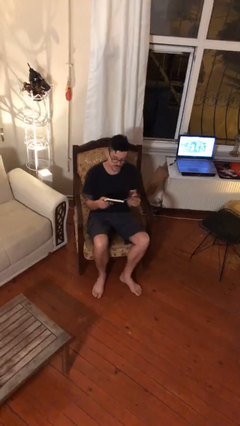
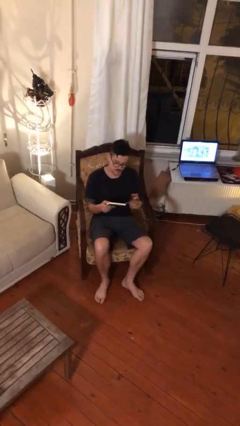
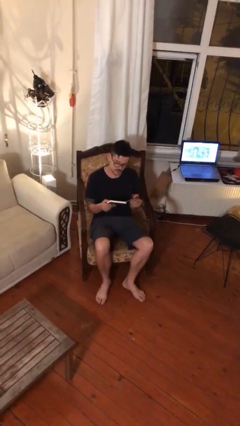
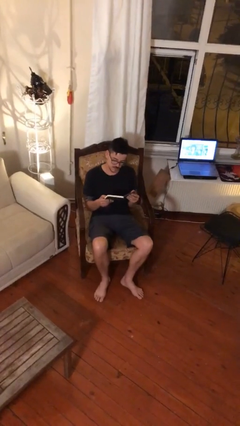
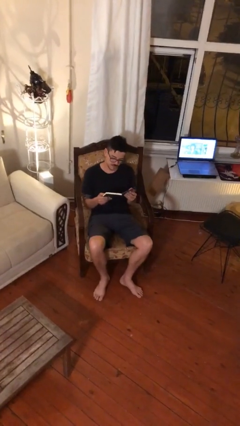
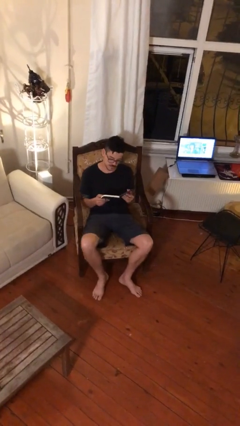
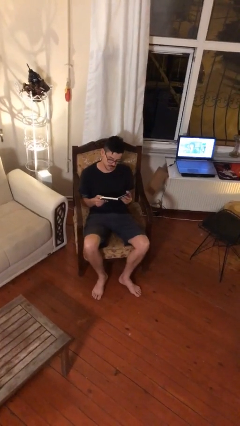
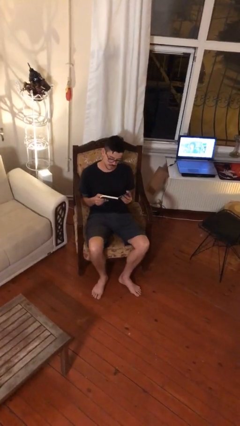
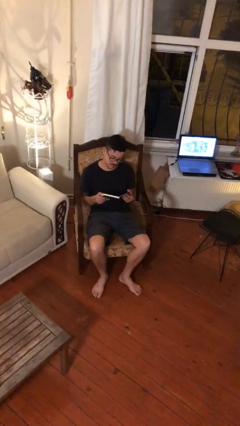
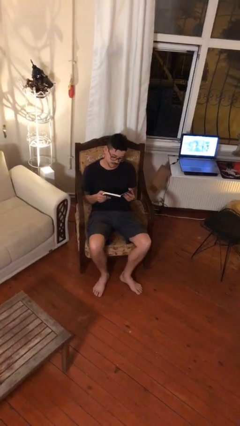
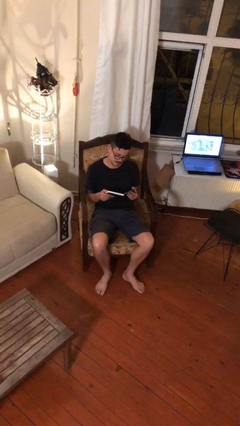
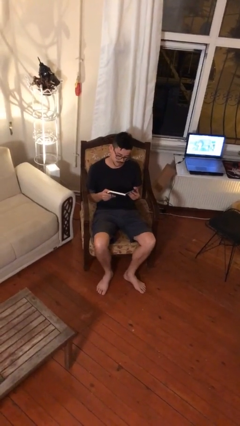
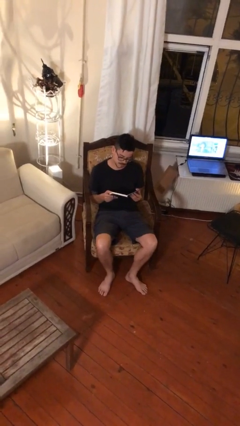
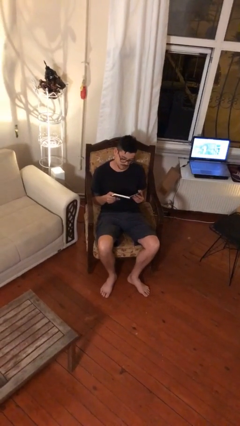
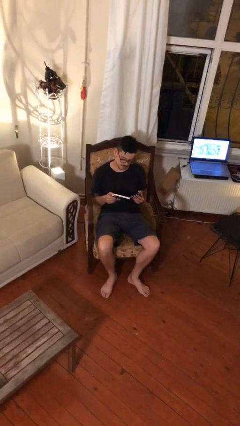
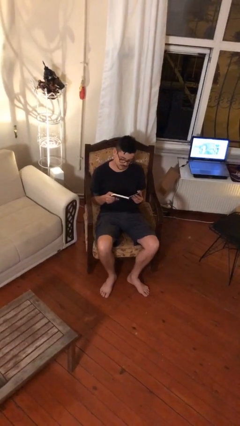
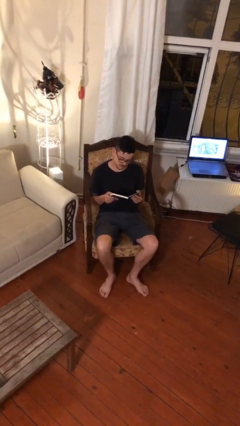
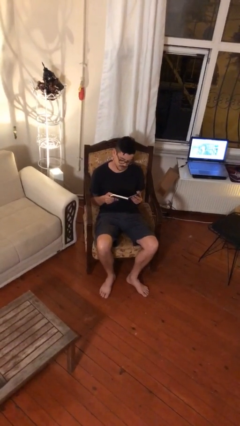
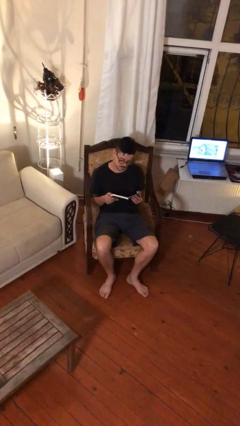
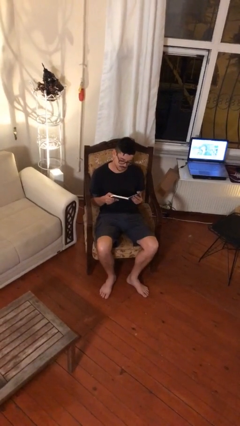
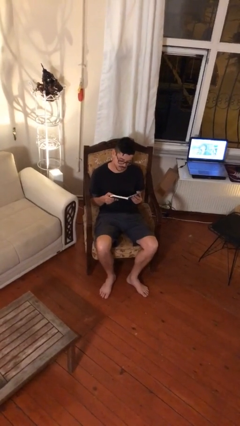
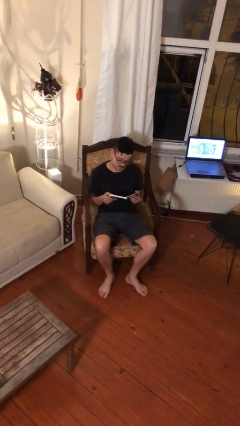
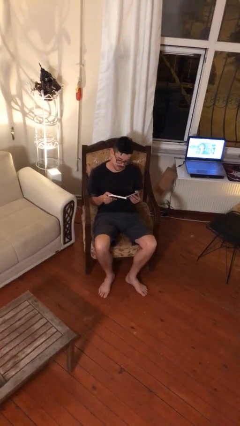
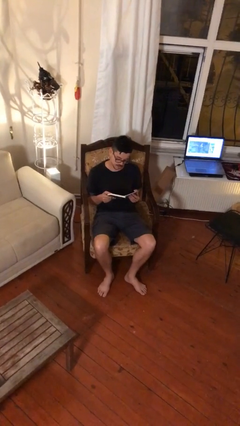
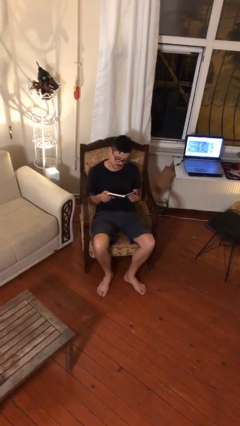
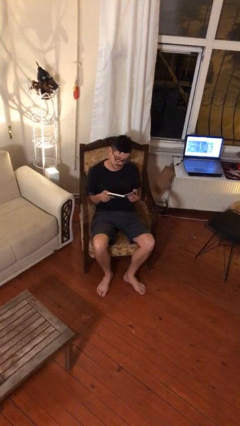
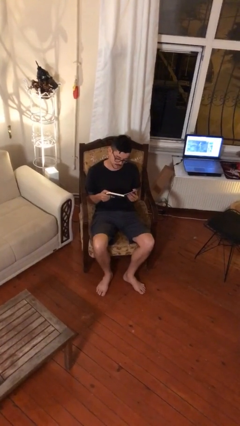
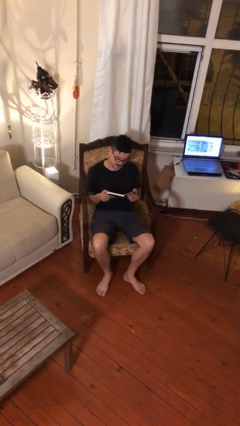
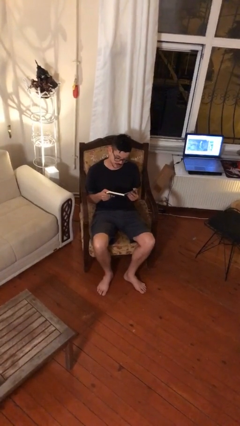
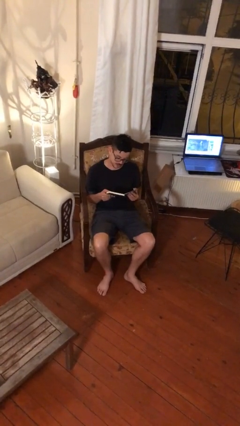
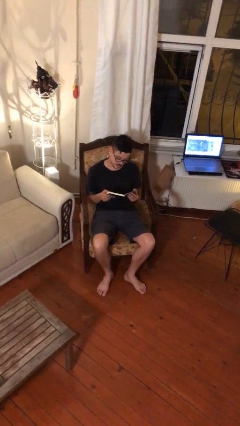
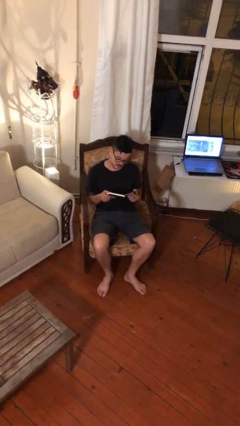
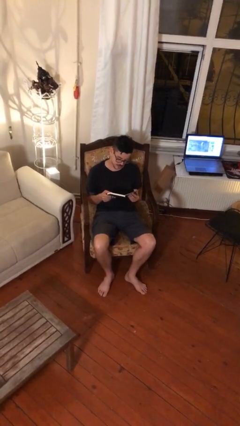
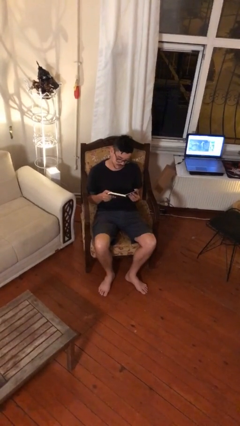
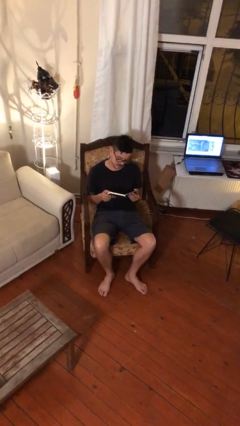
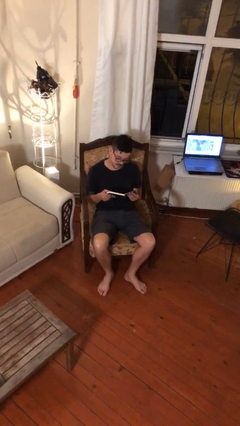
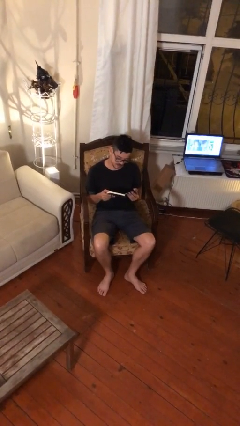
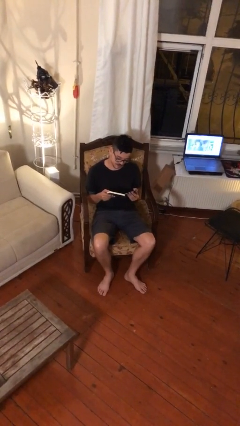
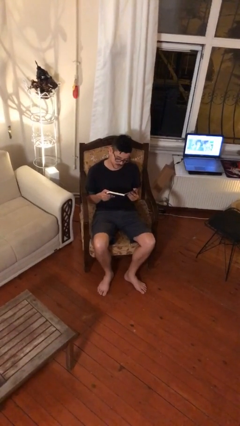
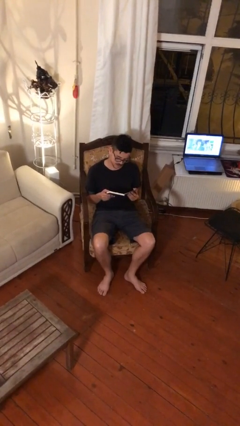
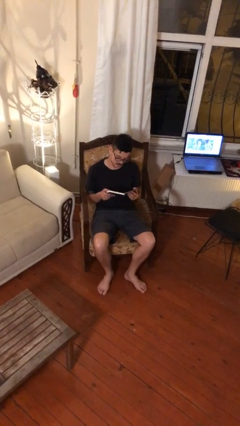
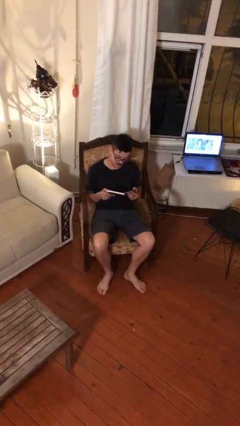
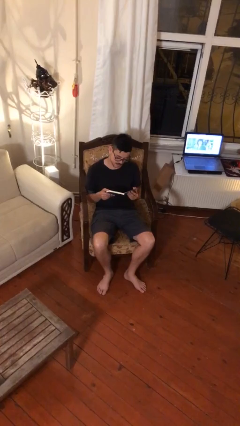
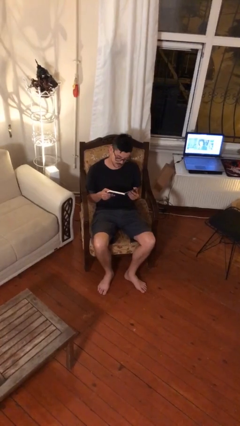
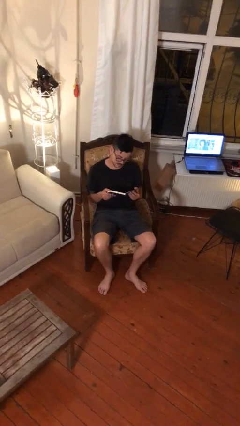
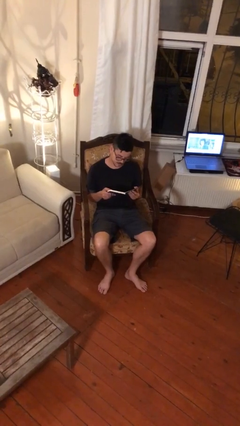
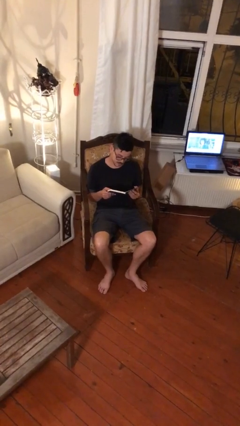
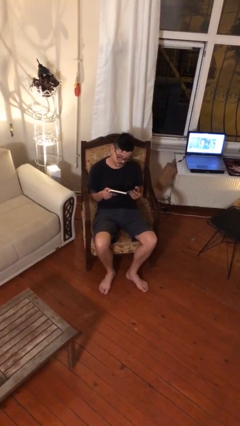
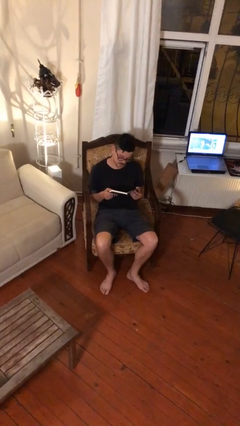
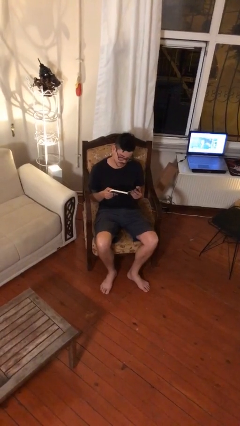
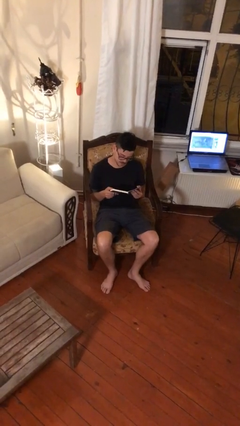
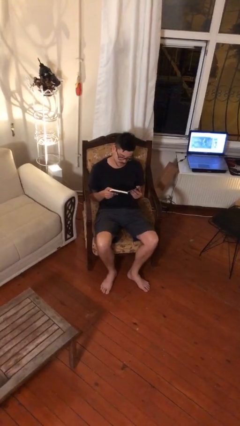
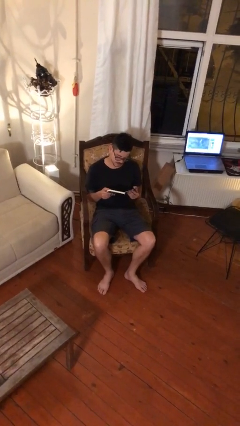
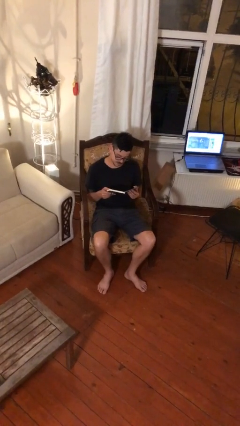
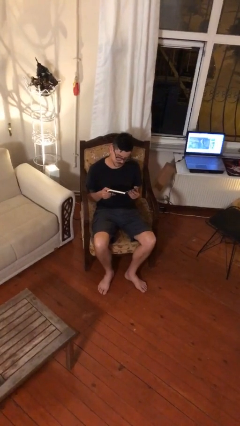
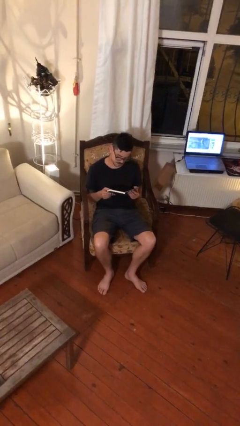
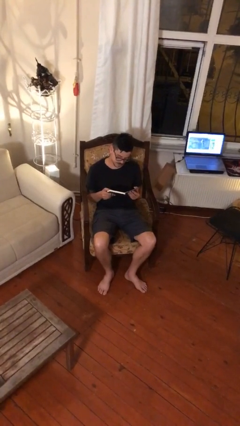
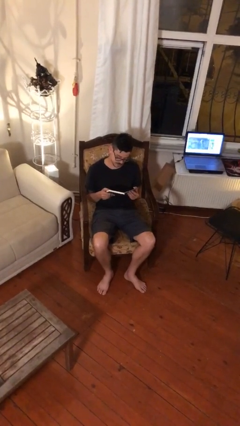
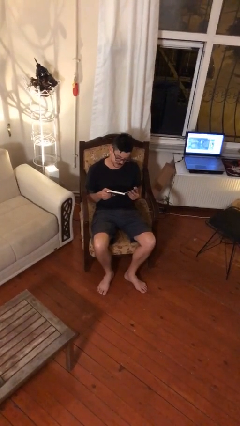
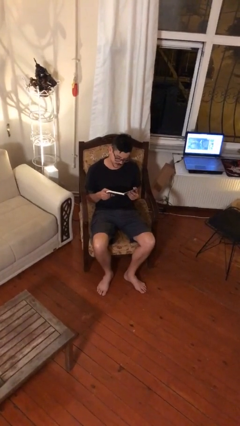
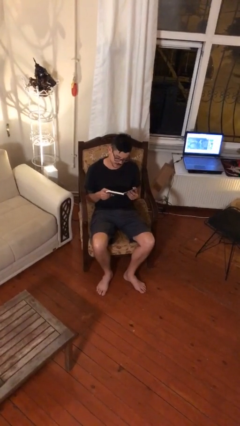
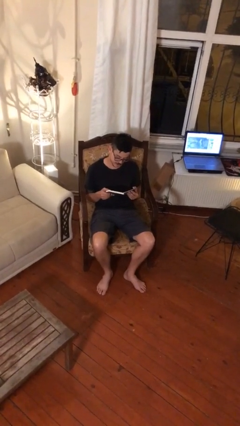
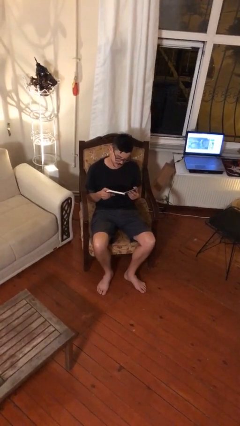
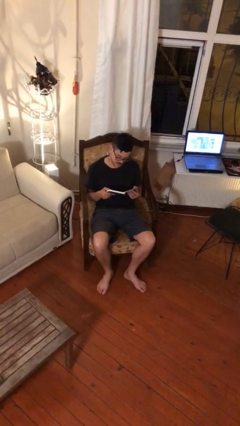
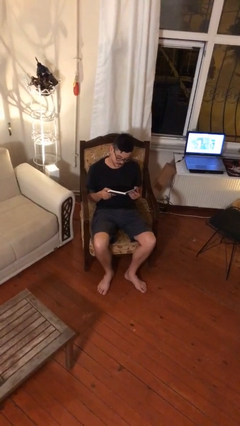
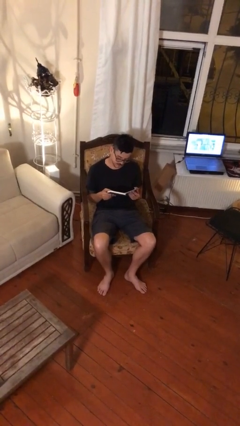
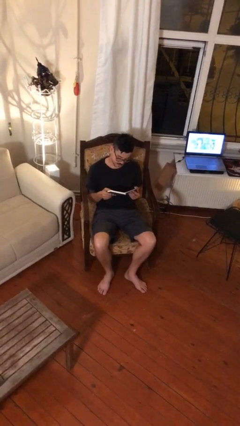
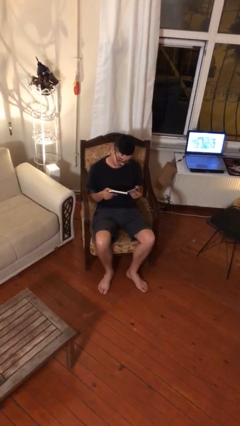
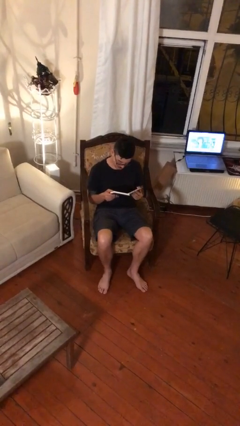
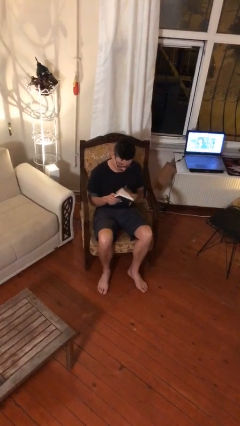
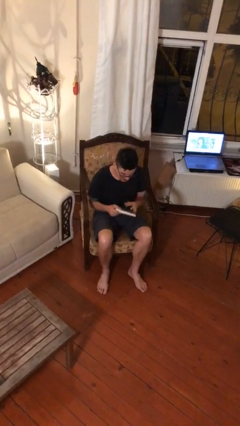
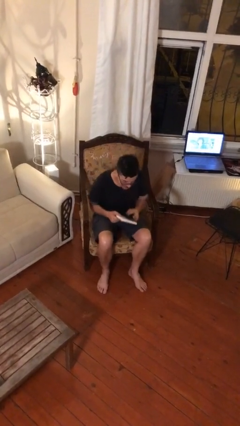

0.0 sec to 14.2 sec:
person reads document

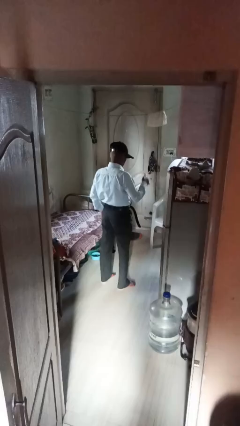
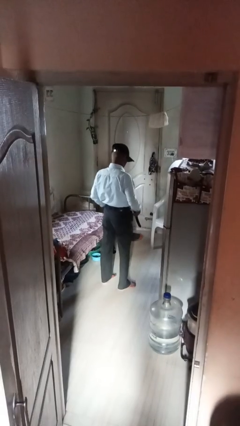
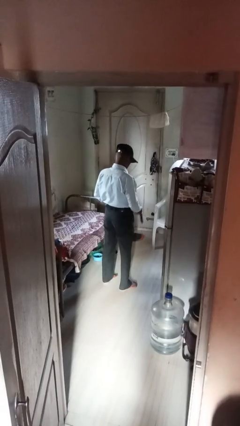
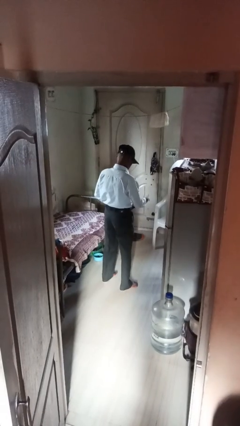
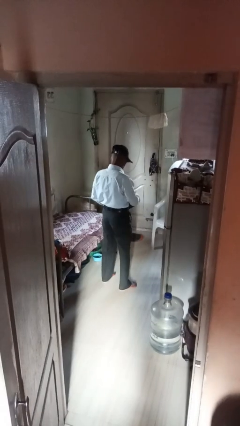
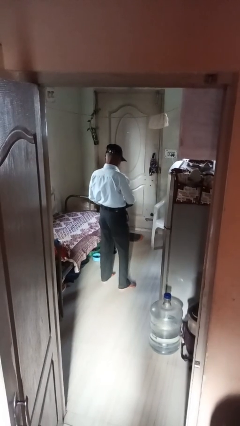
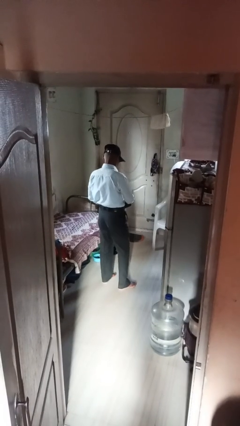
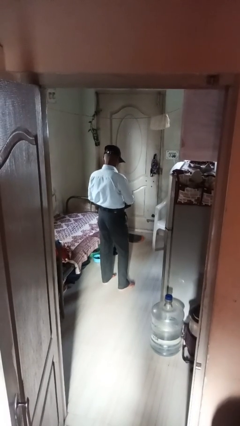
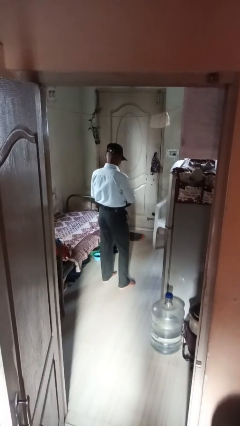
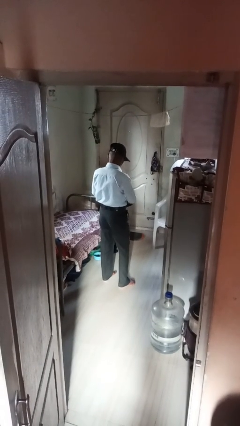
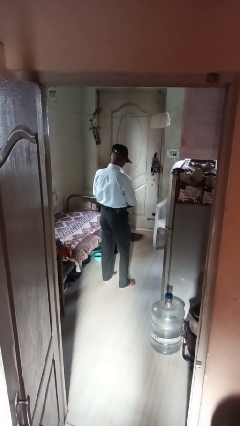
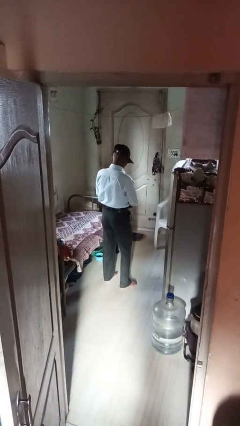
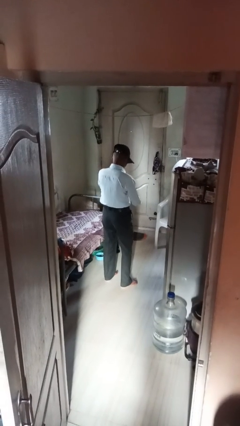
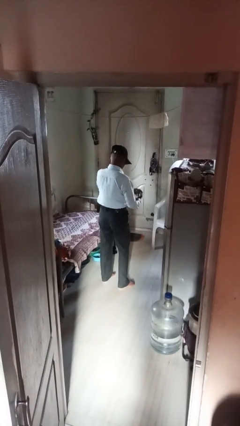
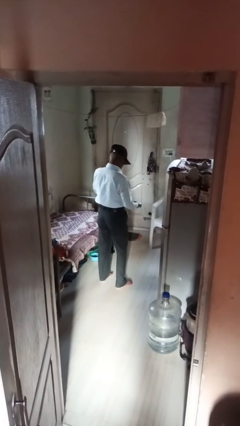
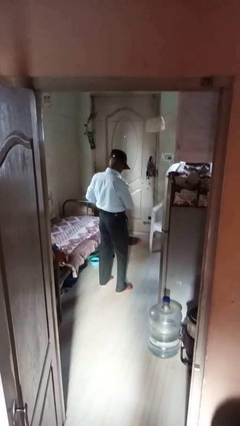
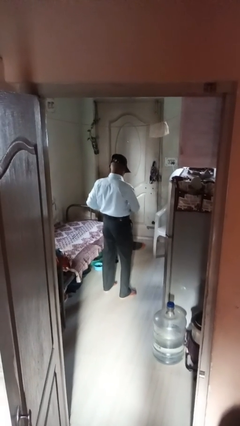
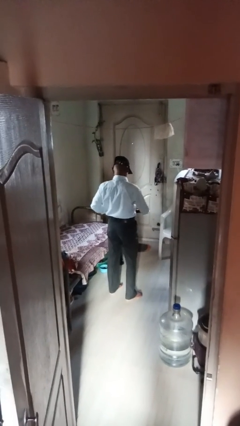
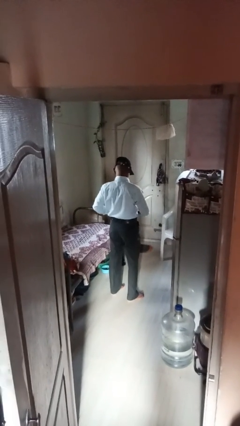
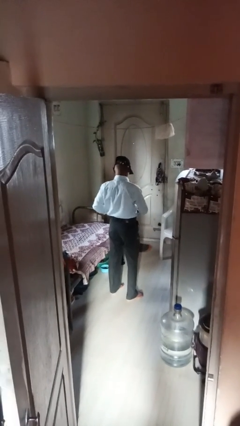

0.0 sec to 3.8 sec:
person puts on belt

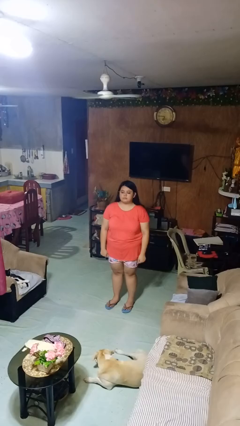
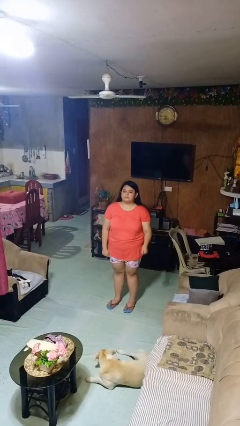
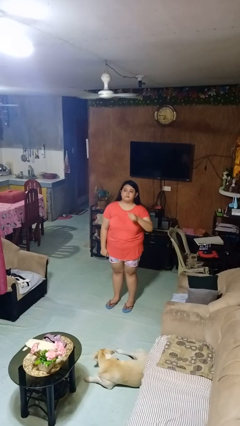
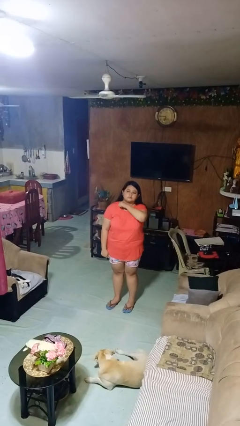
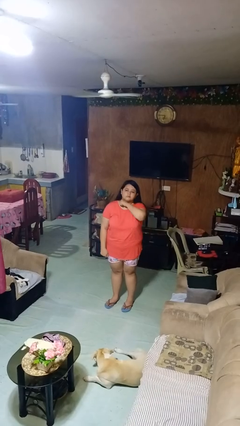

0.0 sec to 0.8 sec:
person gestures cut
